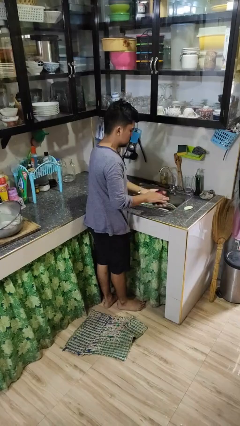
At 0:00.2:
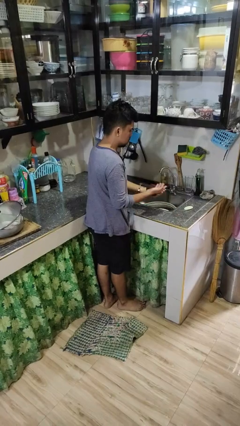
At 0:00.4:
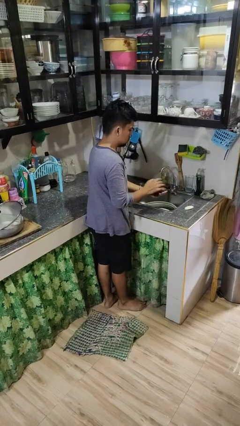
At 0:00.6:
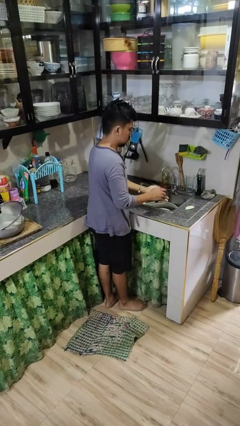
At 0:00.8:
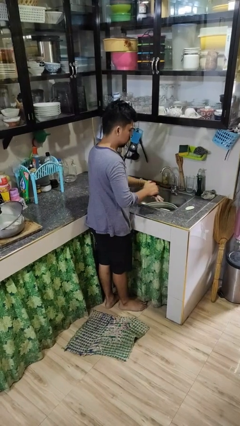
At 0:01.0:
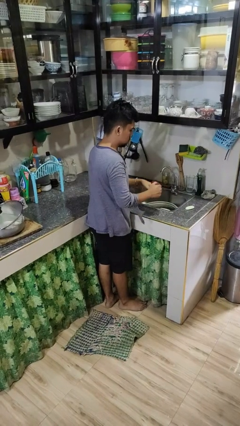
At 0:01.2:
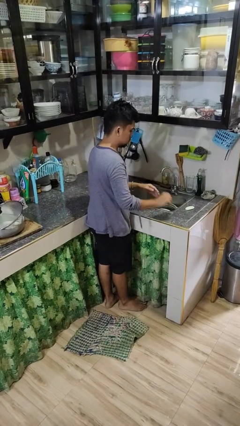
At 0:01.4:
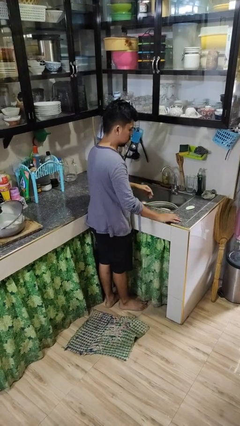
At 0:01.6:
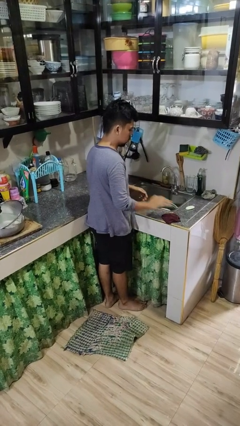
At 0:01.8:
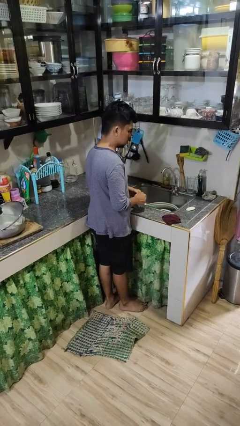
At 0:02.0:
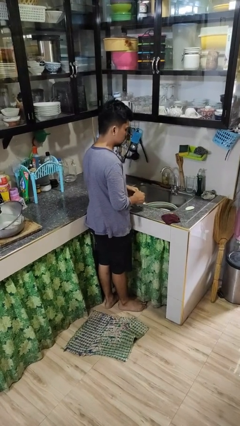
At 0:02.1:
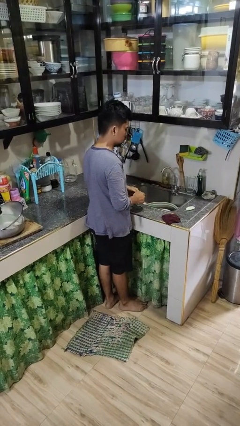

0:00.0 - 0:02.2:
person dries hands with towel

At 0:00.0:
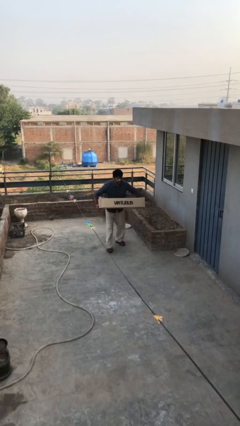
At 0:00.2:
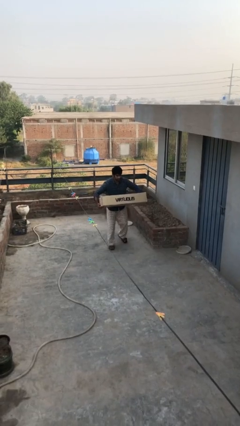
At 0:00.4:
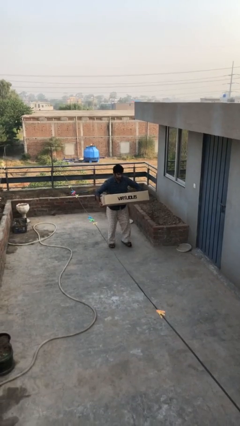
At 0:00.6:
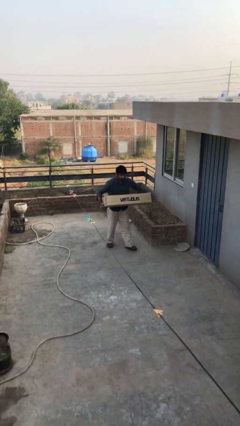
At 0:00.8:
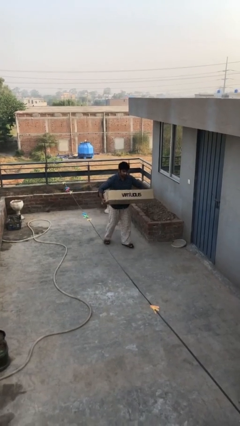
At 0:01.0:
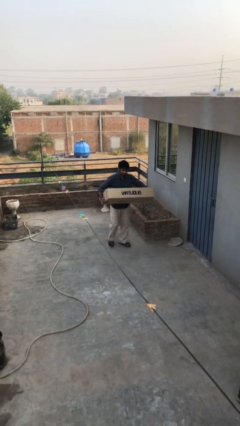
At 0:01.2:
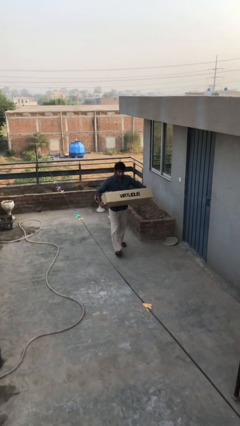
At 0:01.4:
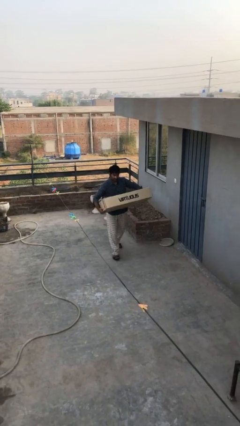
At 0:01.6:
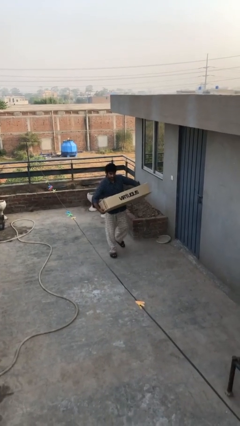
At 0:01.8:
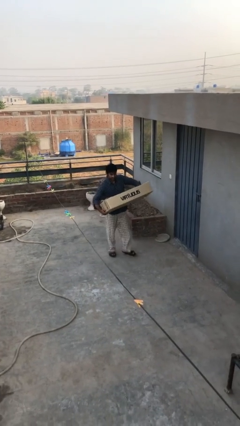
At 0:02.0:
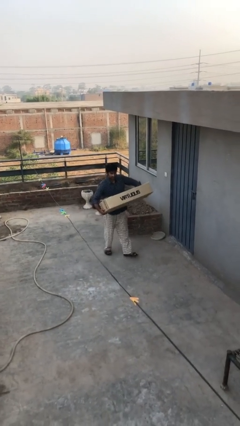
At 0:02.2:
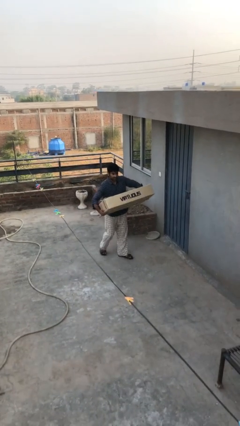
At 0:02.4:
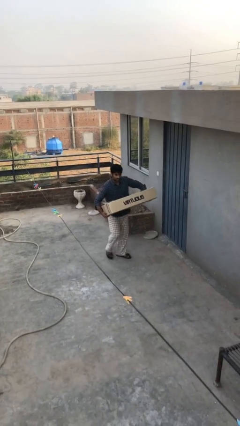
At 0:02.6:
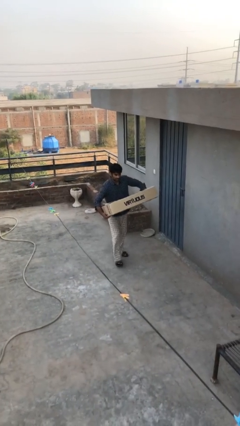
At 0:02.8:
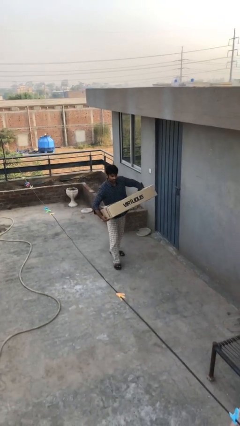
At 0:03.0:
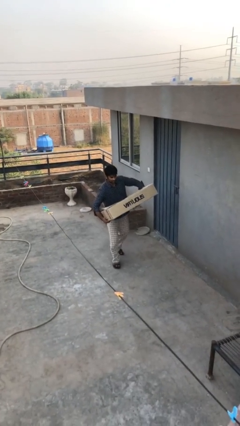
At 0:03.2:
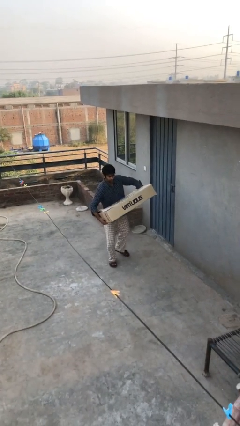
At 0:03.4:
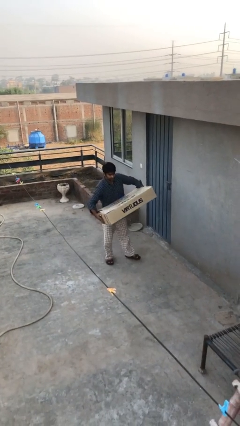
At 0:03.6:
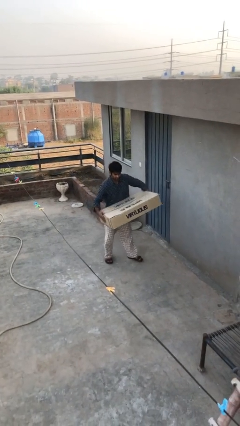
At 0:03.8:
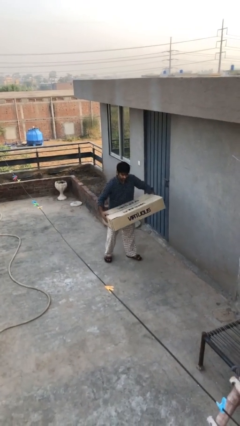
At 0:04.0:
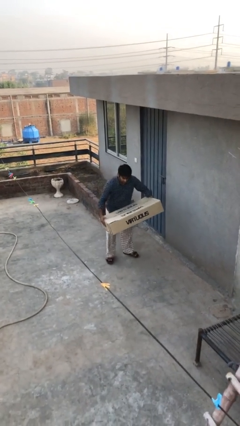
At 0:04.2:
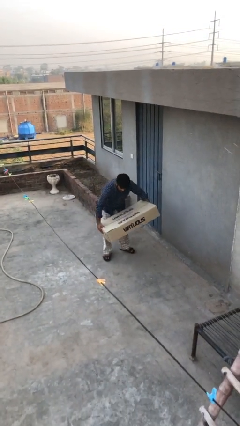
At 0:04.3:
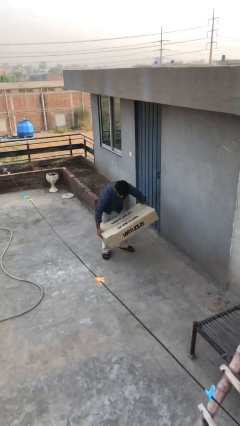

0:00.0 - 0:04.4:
person carries heavy object

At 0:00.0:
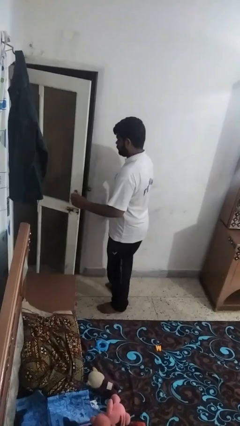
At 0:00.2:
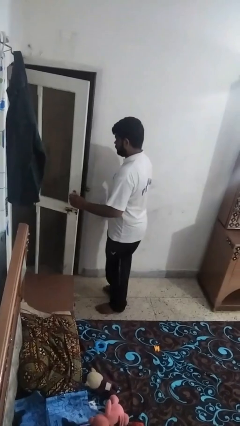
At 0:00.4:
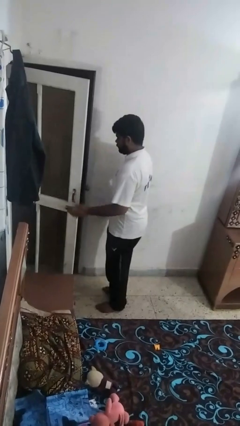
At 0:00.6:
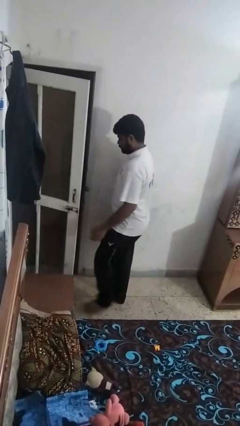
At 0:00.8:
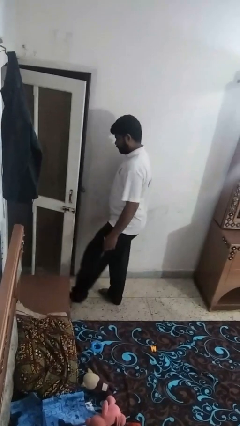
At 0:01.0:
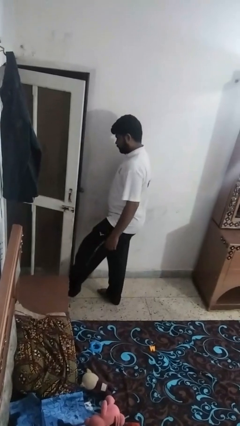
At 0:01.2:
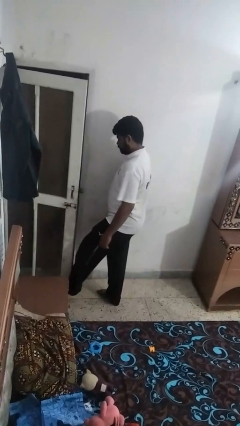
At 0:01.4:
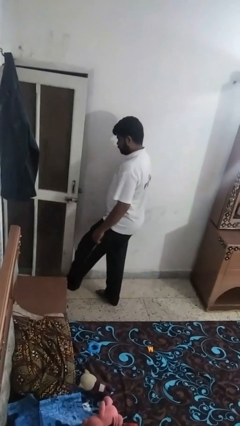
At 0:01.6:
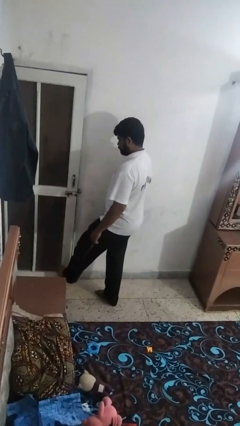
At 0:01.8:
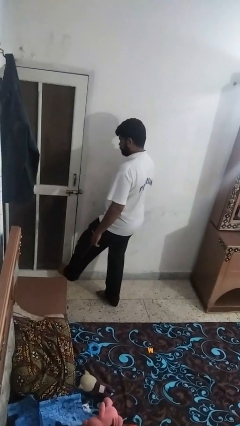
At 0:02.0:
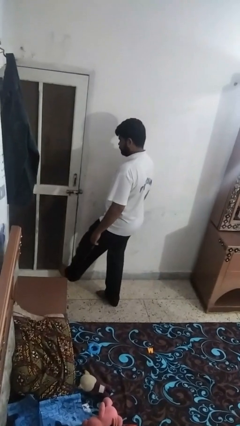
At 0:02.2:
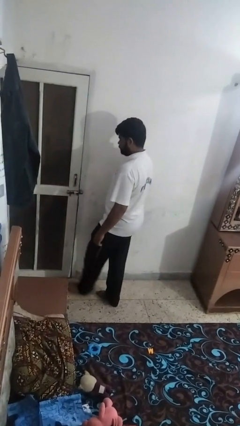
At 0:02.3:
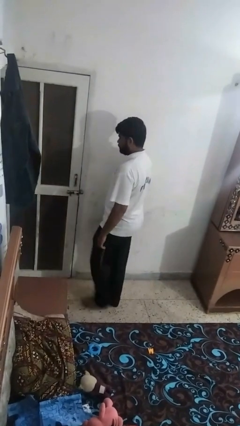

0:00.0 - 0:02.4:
person closes door with foot

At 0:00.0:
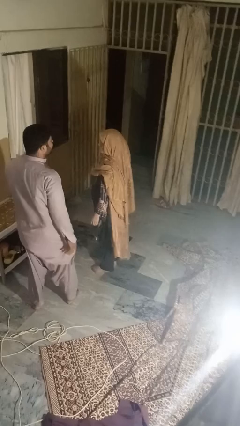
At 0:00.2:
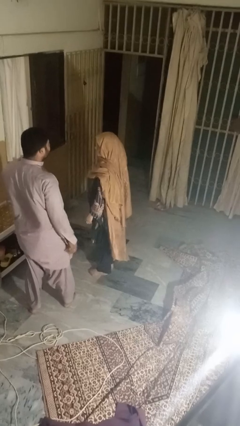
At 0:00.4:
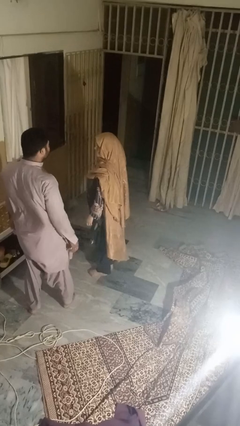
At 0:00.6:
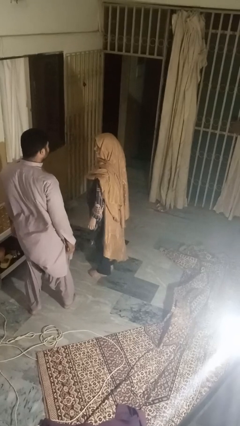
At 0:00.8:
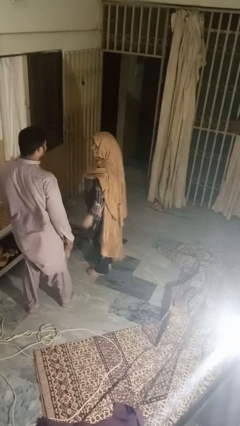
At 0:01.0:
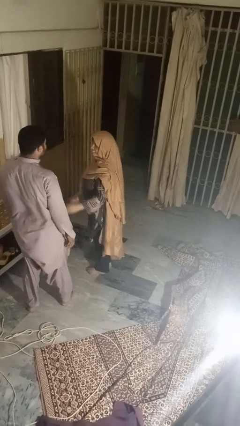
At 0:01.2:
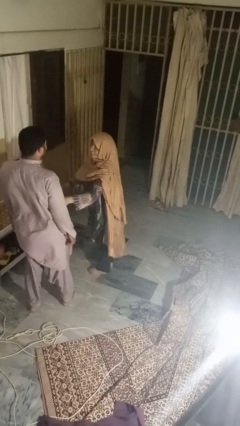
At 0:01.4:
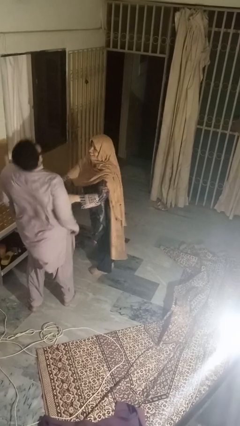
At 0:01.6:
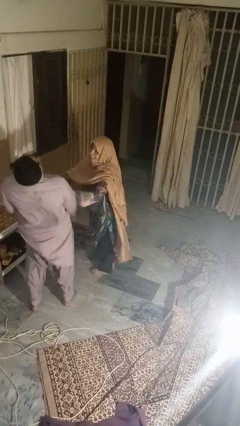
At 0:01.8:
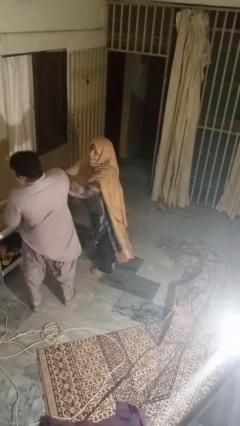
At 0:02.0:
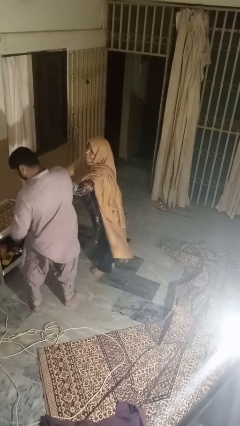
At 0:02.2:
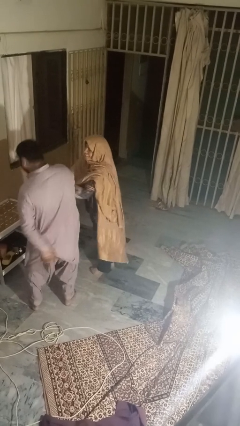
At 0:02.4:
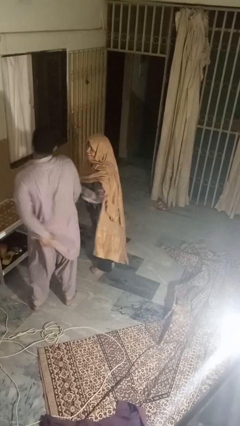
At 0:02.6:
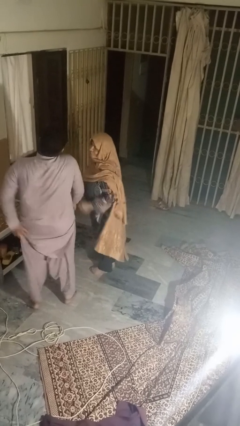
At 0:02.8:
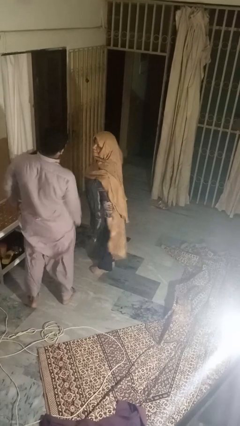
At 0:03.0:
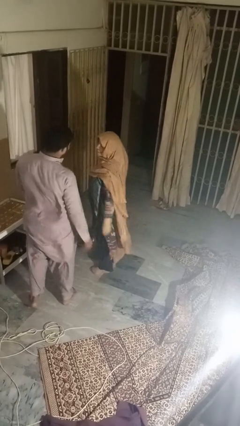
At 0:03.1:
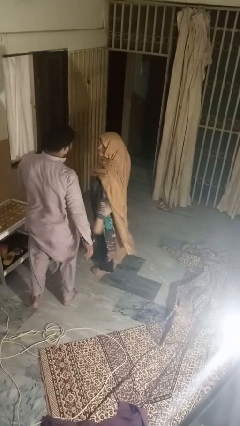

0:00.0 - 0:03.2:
person tickles person

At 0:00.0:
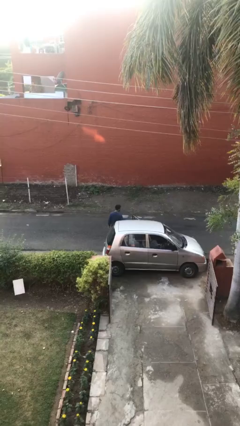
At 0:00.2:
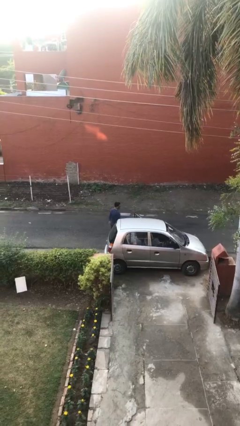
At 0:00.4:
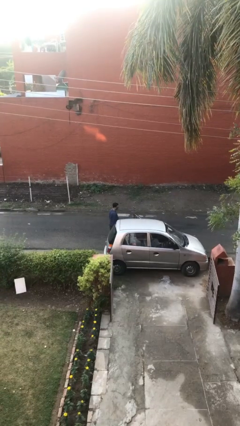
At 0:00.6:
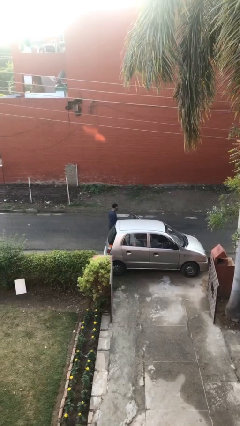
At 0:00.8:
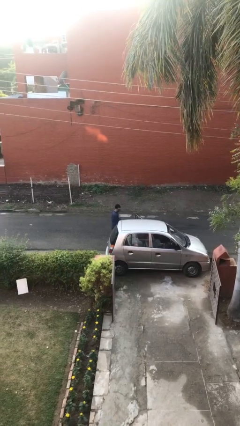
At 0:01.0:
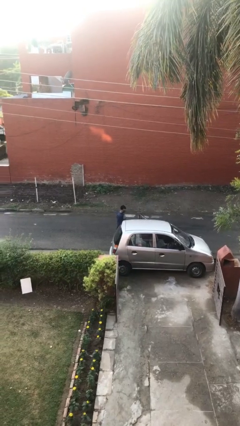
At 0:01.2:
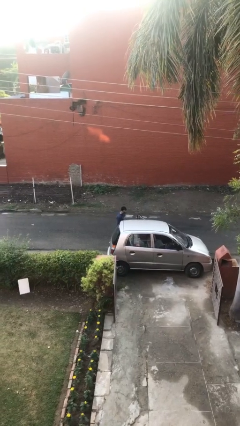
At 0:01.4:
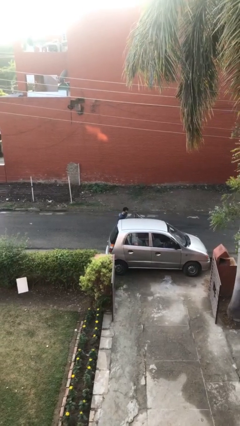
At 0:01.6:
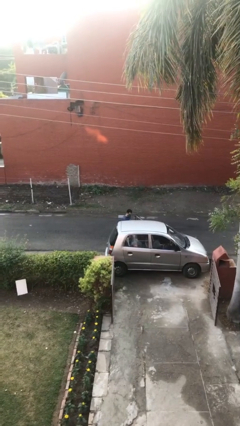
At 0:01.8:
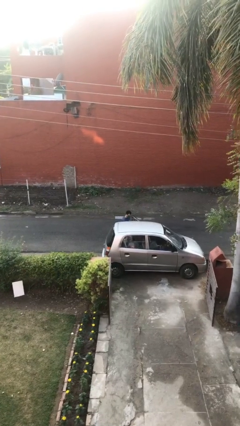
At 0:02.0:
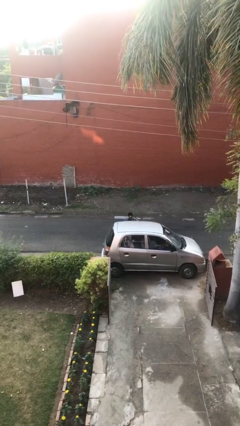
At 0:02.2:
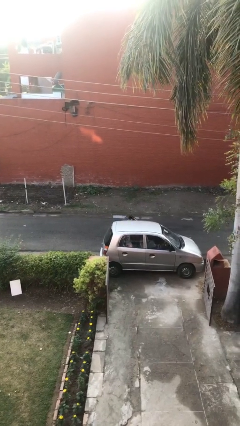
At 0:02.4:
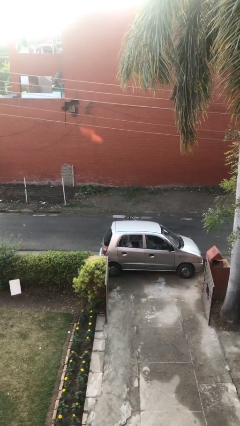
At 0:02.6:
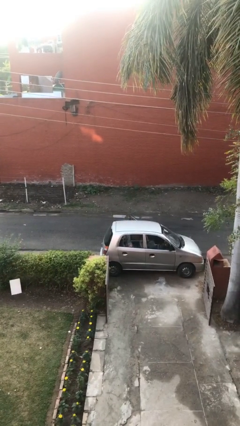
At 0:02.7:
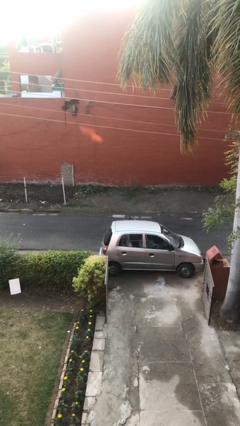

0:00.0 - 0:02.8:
person enters car

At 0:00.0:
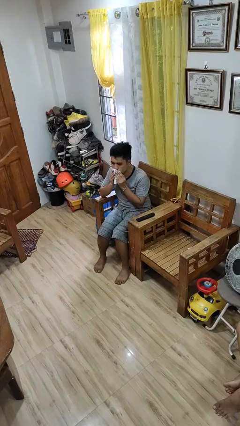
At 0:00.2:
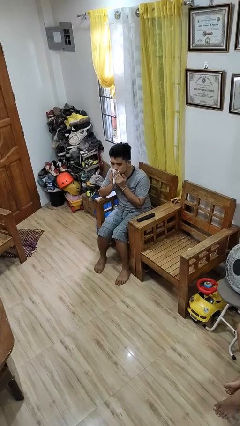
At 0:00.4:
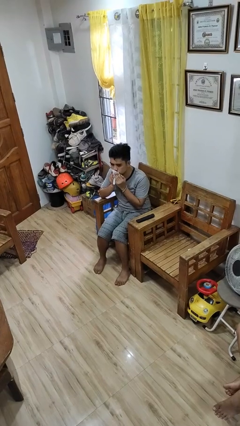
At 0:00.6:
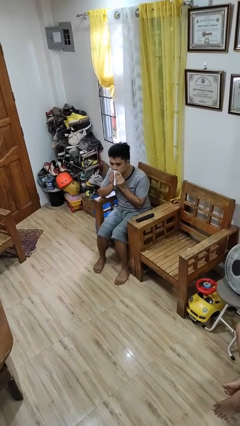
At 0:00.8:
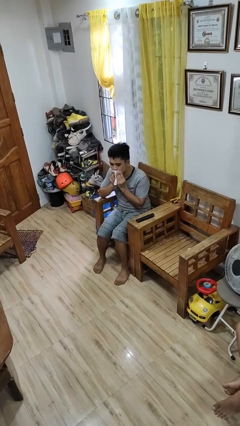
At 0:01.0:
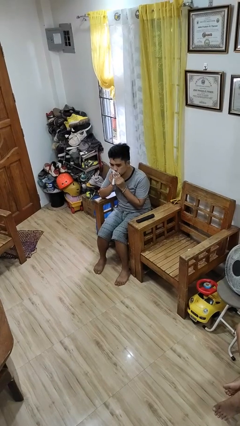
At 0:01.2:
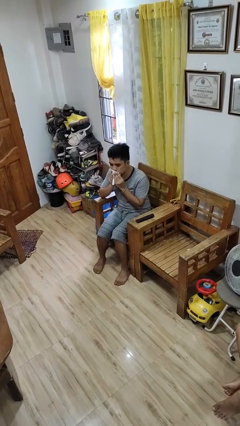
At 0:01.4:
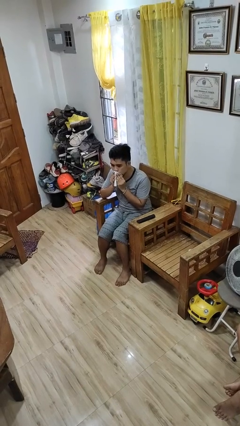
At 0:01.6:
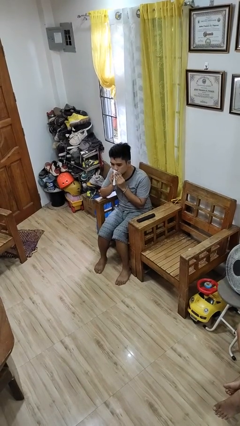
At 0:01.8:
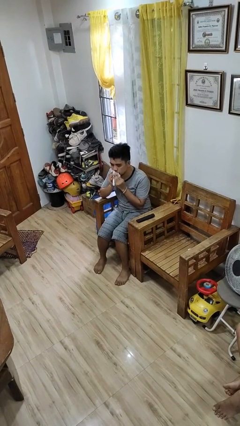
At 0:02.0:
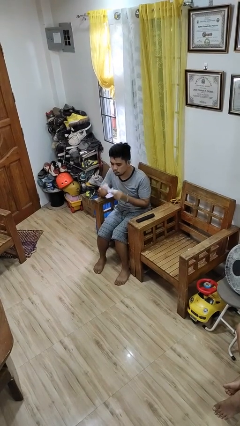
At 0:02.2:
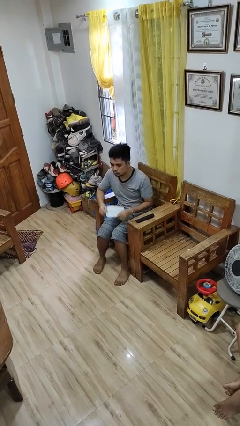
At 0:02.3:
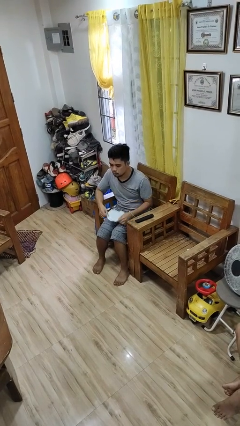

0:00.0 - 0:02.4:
person wipes mouth with napkin
